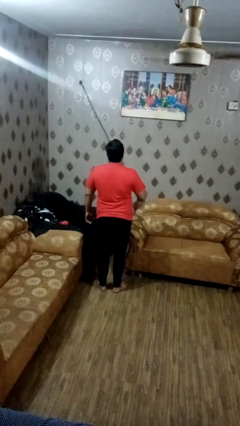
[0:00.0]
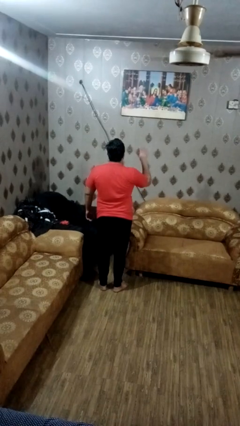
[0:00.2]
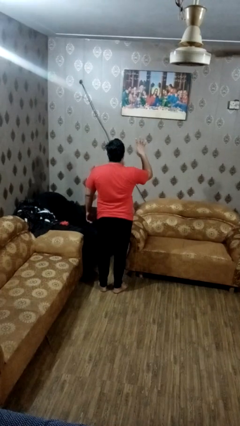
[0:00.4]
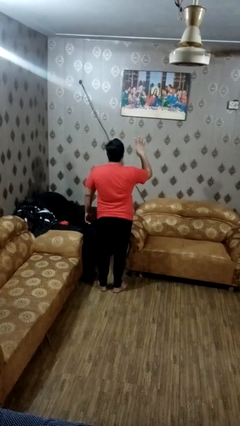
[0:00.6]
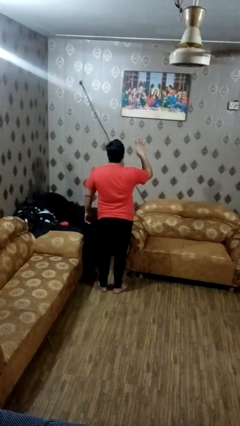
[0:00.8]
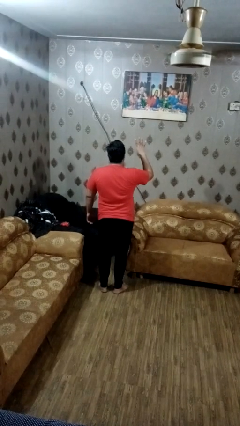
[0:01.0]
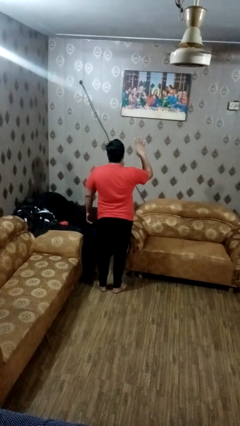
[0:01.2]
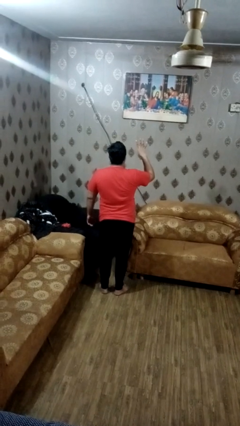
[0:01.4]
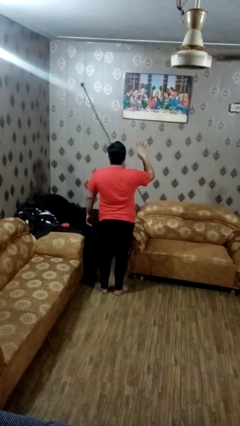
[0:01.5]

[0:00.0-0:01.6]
person gestures number four

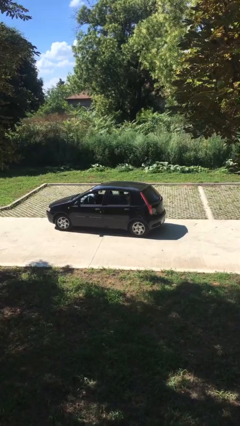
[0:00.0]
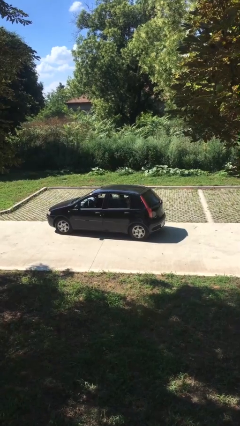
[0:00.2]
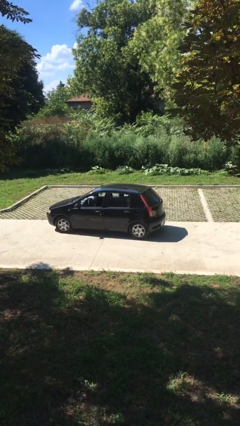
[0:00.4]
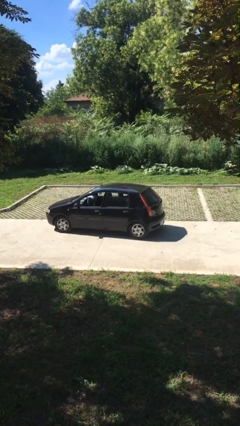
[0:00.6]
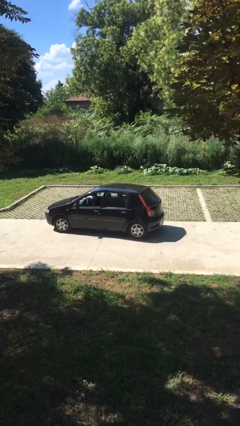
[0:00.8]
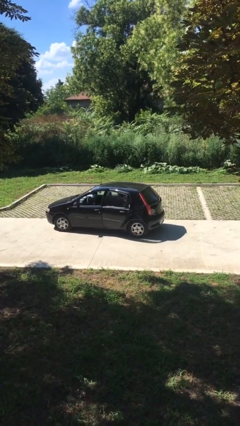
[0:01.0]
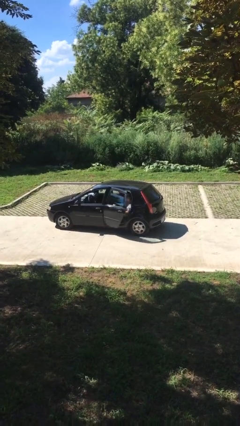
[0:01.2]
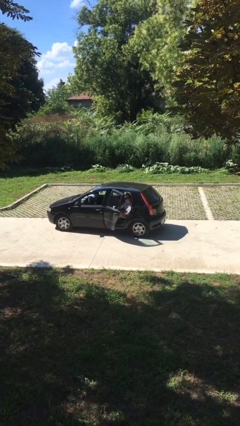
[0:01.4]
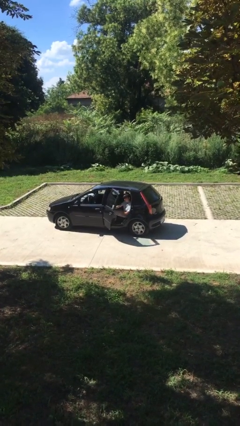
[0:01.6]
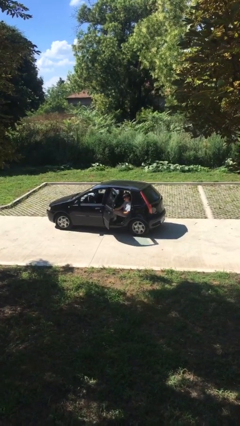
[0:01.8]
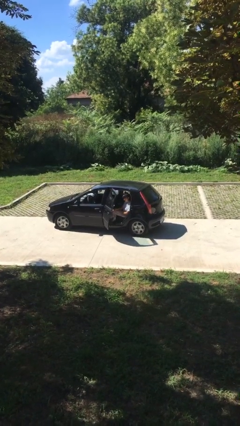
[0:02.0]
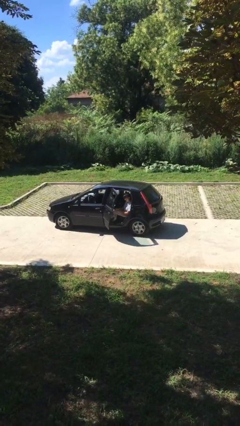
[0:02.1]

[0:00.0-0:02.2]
person opens car door

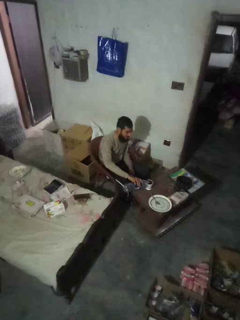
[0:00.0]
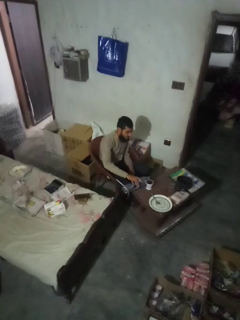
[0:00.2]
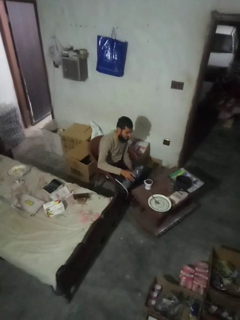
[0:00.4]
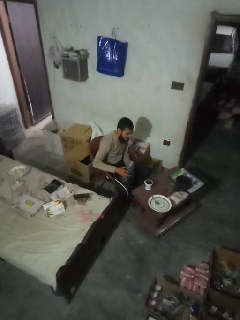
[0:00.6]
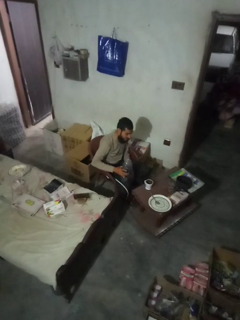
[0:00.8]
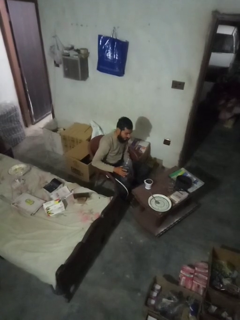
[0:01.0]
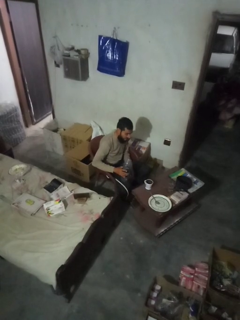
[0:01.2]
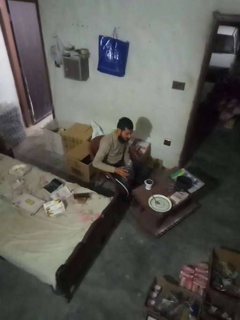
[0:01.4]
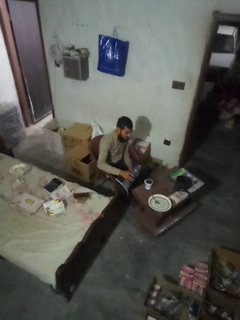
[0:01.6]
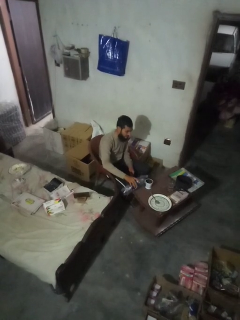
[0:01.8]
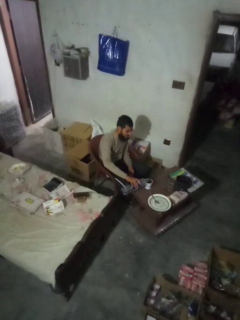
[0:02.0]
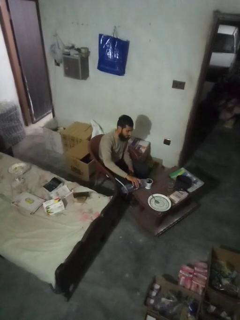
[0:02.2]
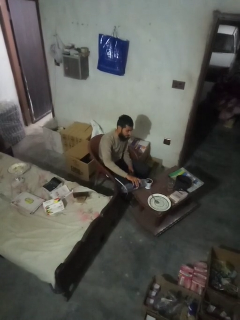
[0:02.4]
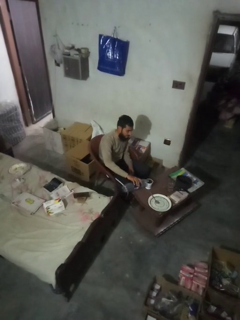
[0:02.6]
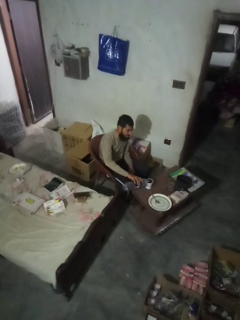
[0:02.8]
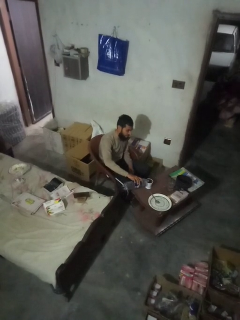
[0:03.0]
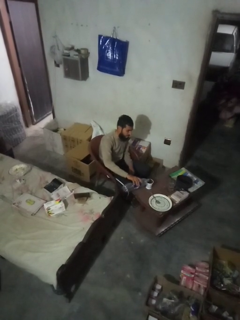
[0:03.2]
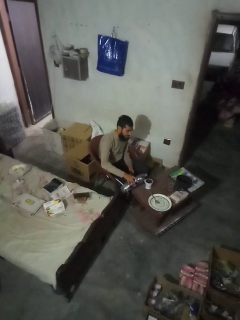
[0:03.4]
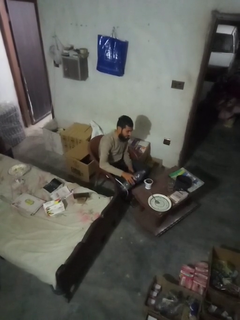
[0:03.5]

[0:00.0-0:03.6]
person pours liquid into cup

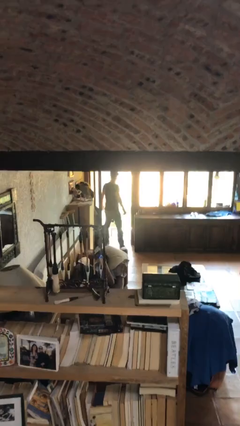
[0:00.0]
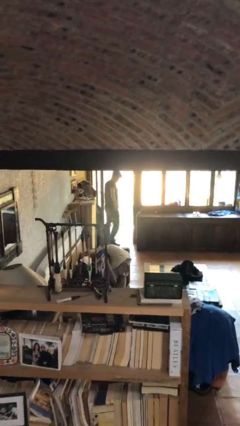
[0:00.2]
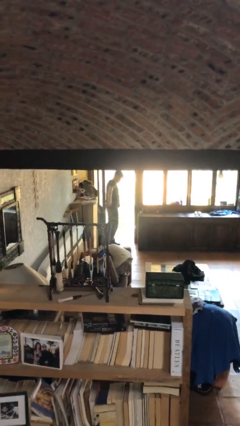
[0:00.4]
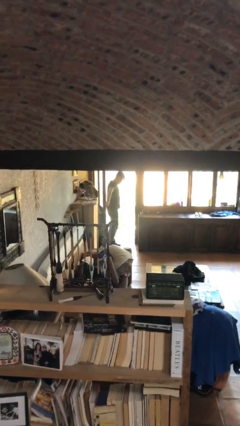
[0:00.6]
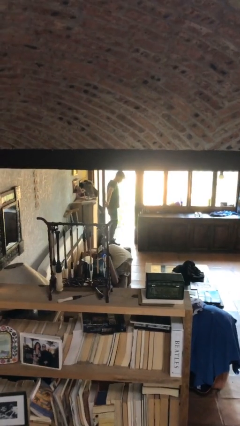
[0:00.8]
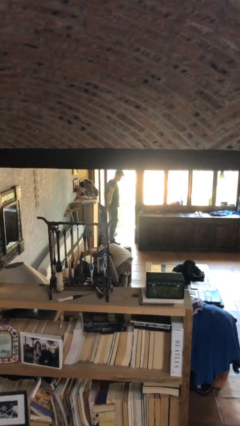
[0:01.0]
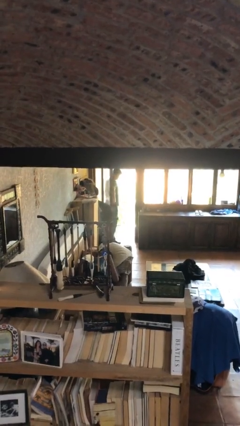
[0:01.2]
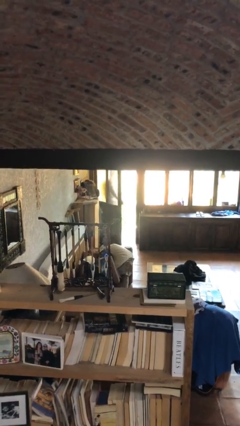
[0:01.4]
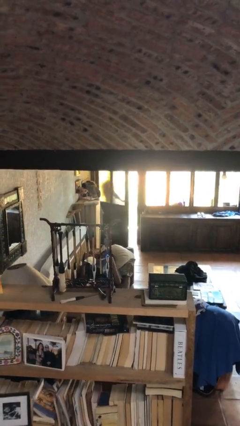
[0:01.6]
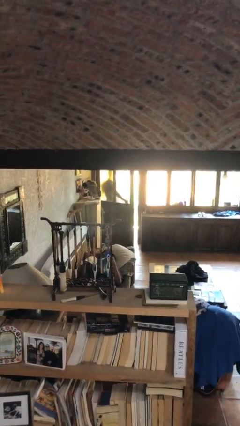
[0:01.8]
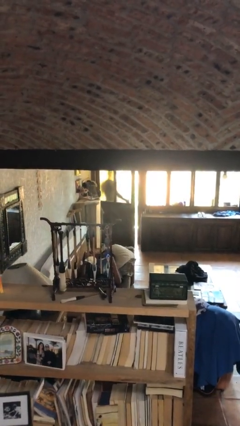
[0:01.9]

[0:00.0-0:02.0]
person closes facility door

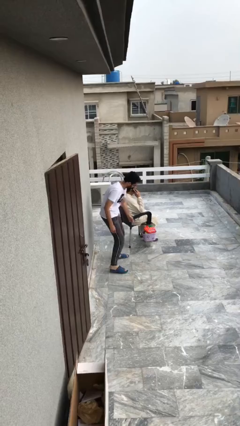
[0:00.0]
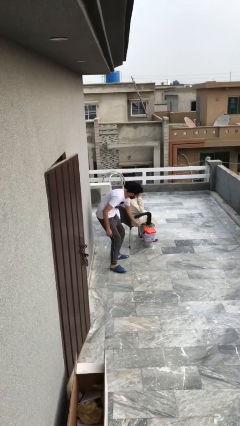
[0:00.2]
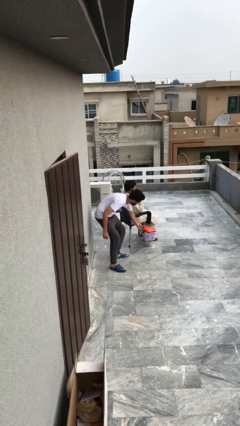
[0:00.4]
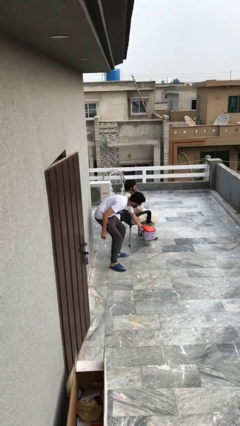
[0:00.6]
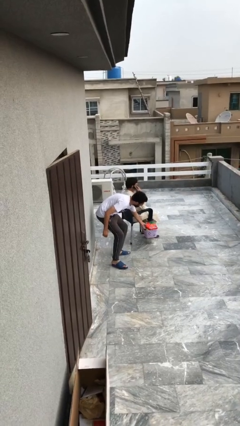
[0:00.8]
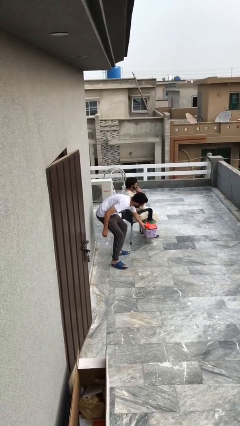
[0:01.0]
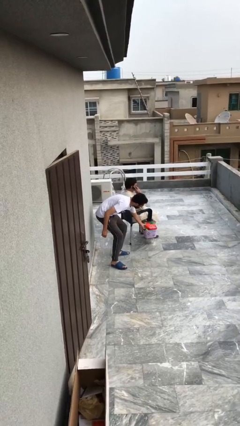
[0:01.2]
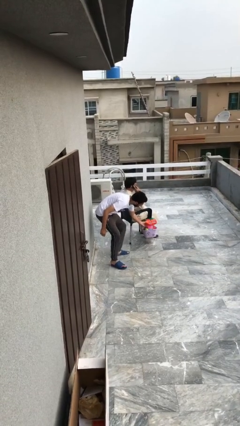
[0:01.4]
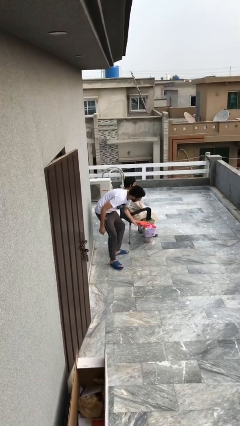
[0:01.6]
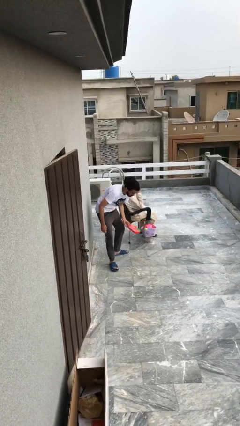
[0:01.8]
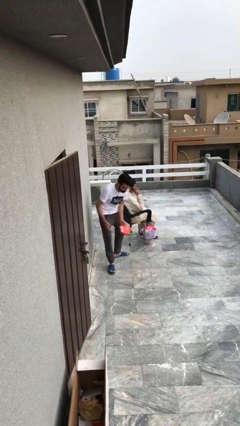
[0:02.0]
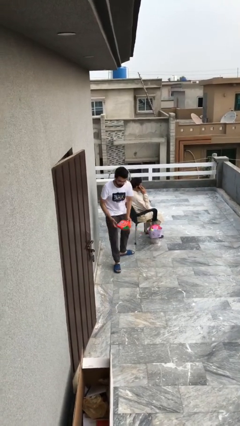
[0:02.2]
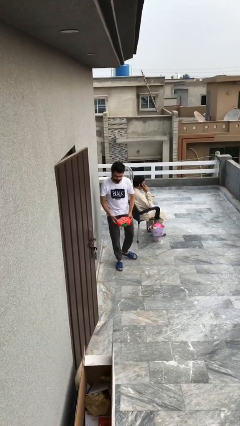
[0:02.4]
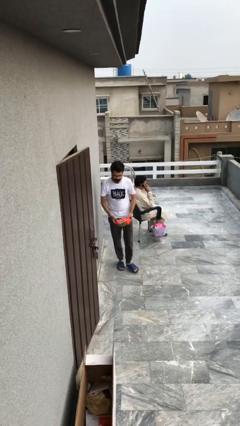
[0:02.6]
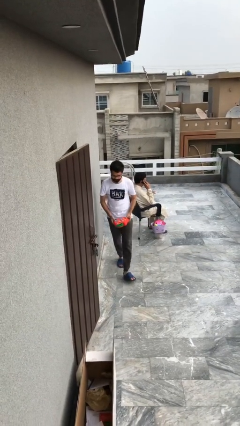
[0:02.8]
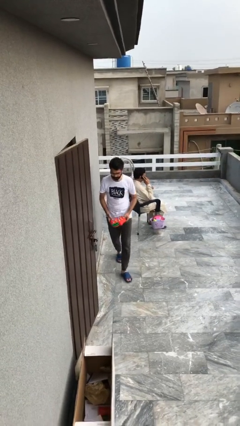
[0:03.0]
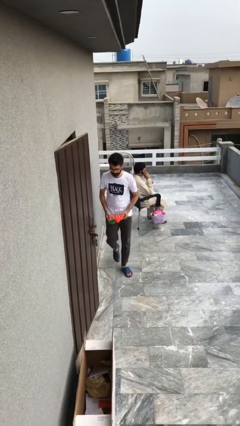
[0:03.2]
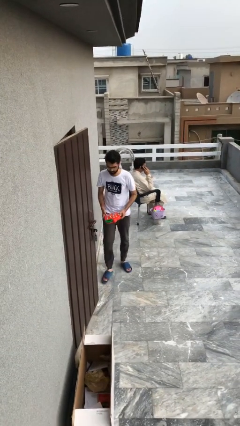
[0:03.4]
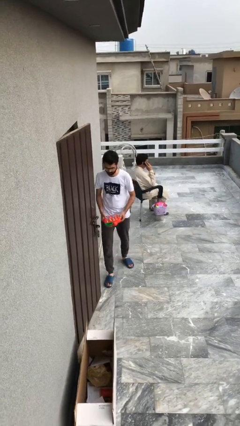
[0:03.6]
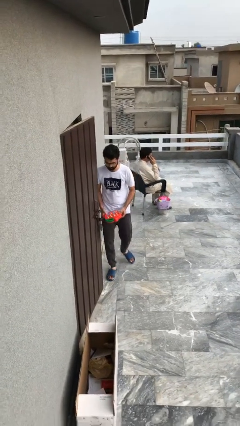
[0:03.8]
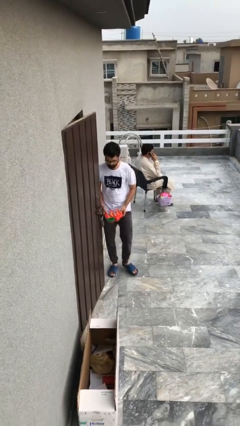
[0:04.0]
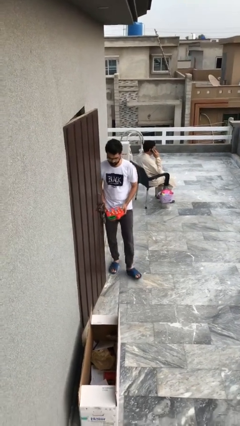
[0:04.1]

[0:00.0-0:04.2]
person steals object from person

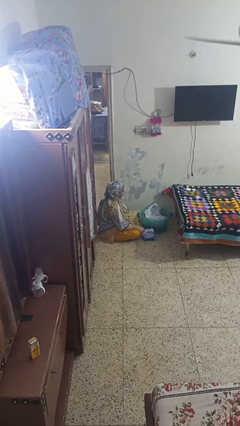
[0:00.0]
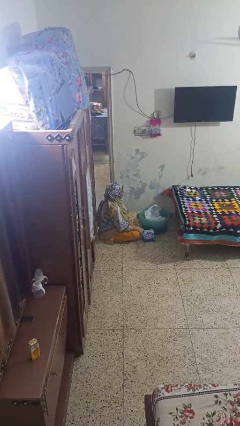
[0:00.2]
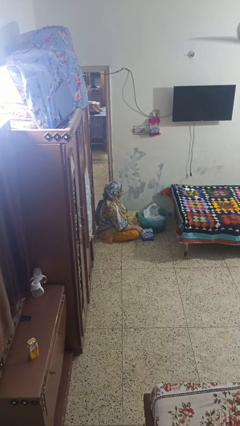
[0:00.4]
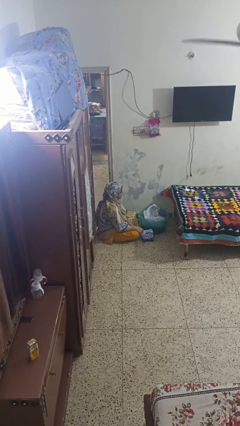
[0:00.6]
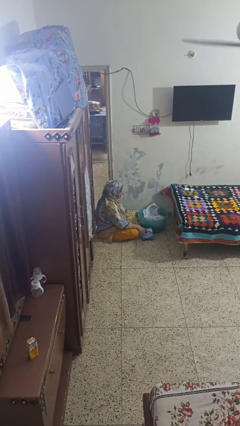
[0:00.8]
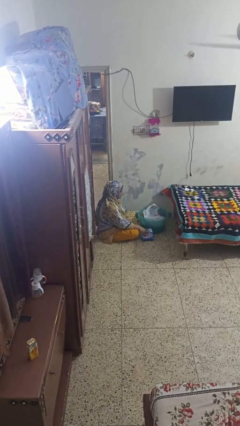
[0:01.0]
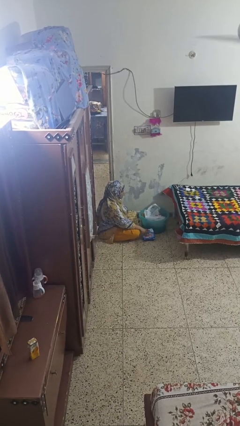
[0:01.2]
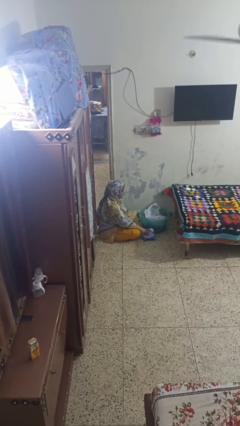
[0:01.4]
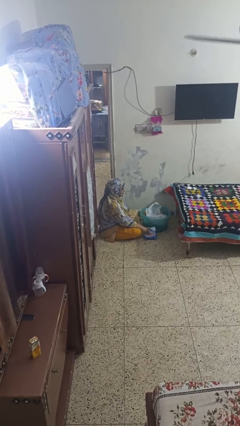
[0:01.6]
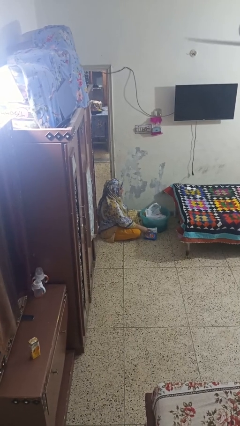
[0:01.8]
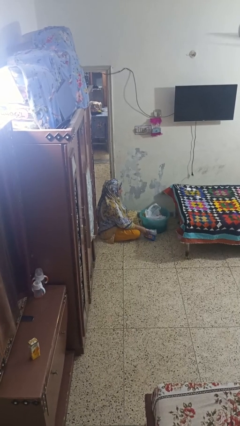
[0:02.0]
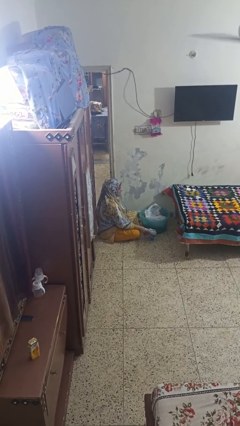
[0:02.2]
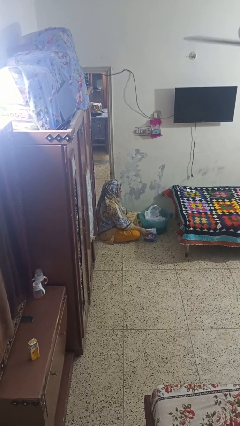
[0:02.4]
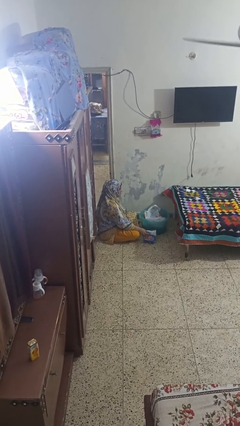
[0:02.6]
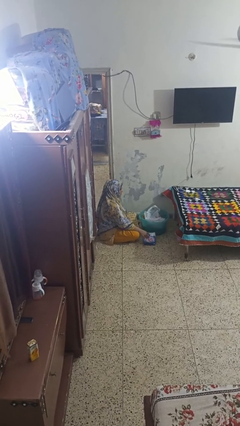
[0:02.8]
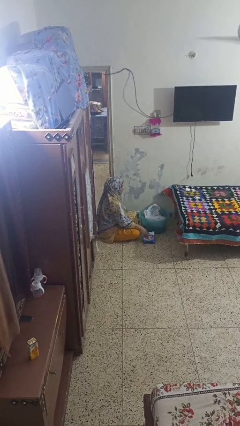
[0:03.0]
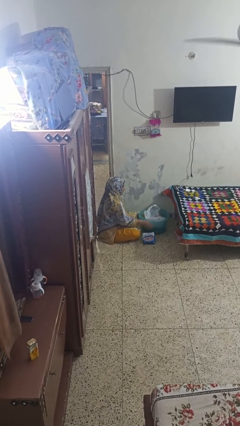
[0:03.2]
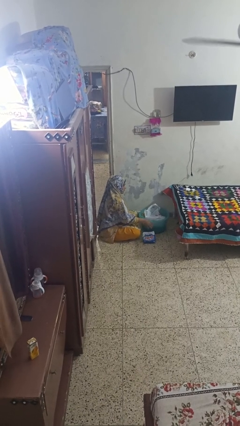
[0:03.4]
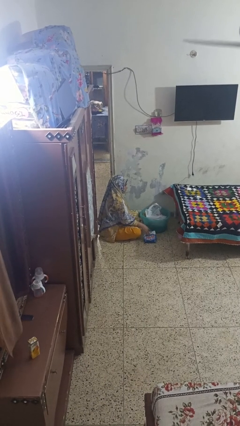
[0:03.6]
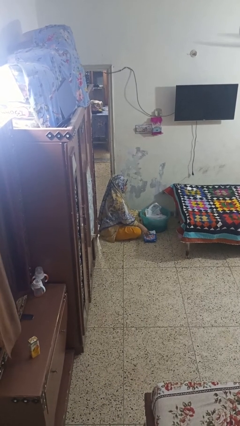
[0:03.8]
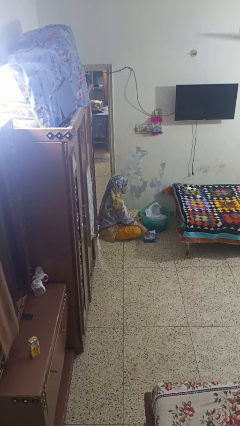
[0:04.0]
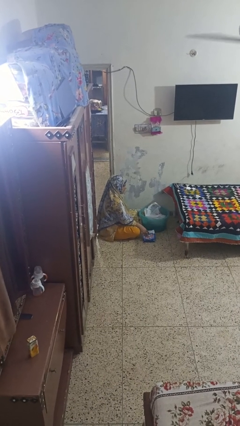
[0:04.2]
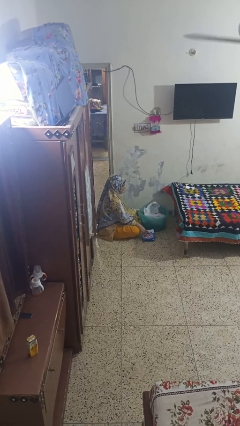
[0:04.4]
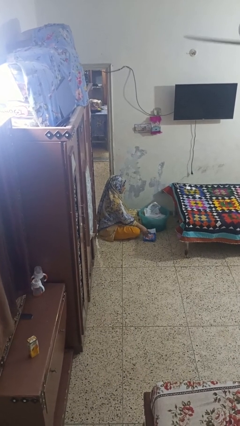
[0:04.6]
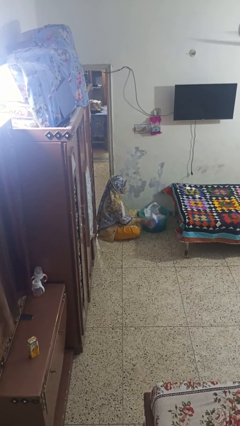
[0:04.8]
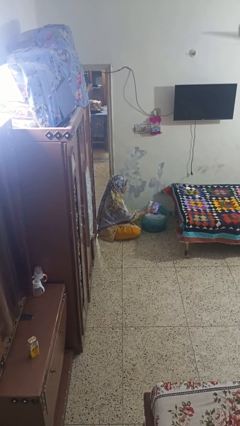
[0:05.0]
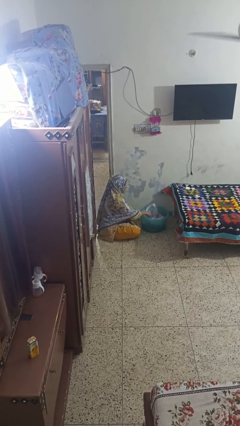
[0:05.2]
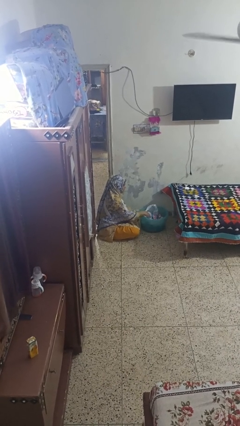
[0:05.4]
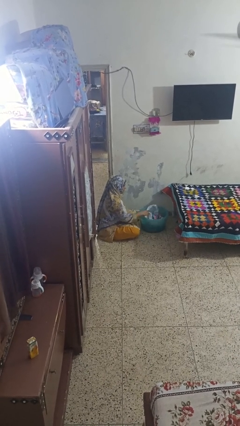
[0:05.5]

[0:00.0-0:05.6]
person puts object into basket
